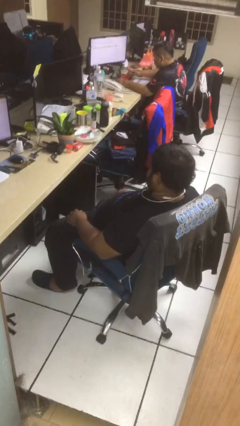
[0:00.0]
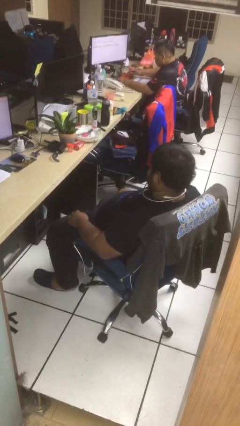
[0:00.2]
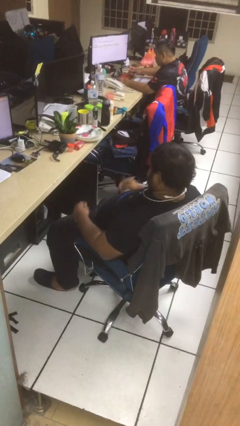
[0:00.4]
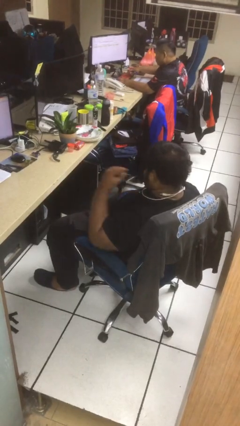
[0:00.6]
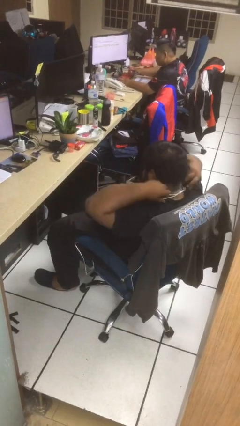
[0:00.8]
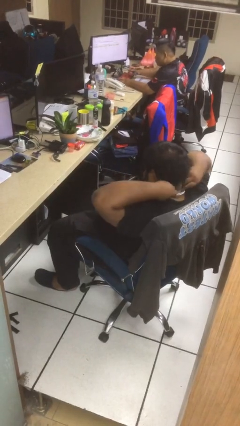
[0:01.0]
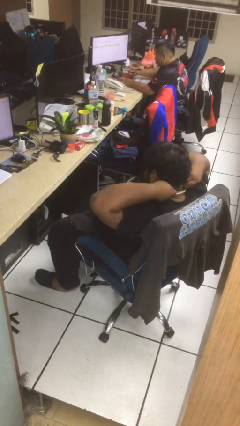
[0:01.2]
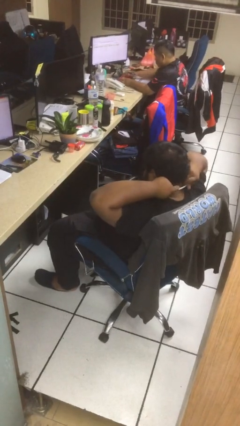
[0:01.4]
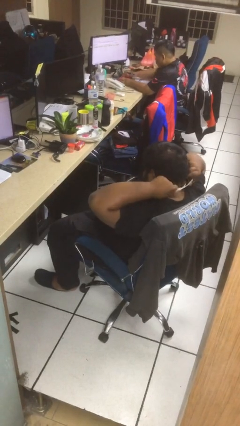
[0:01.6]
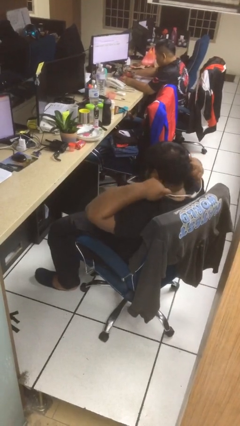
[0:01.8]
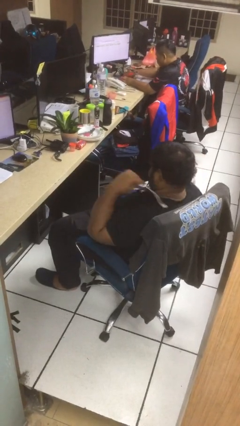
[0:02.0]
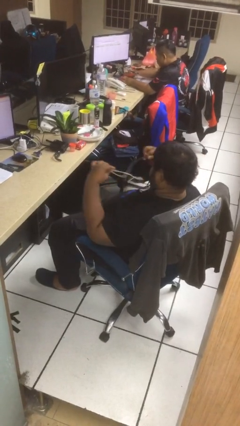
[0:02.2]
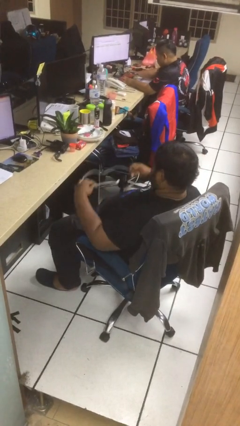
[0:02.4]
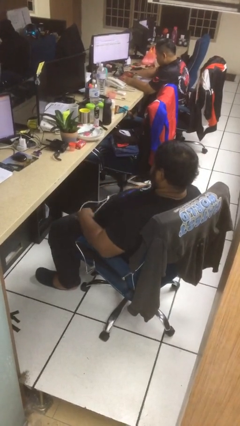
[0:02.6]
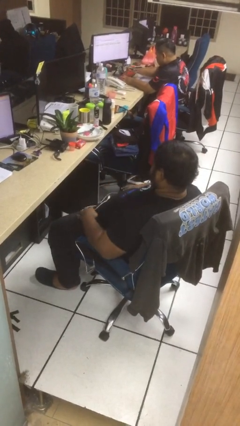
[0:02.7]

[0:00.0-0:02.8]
person takes off necklace

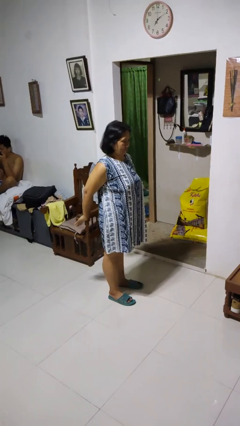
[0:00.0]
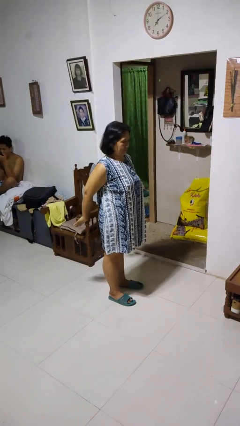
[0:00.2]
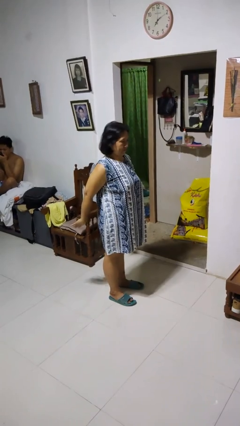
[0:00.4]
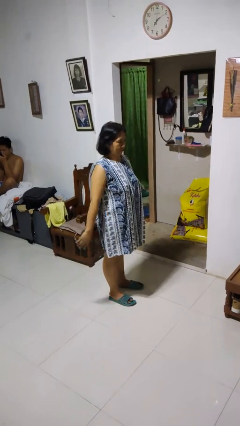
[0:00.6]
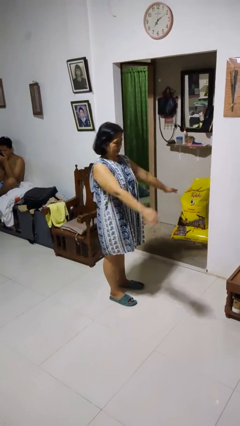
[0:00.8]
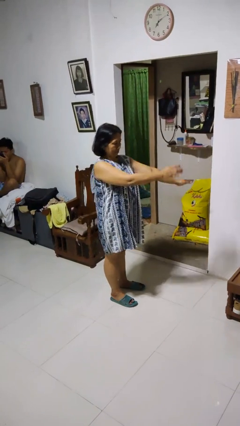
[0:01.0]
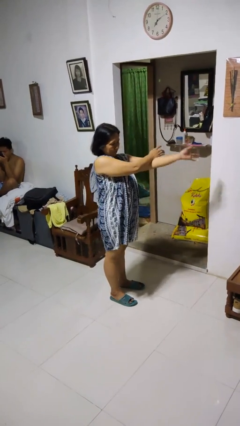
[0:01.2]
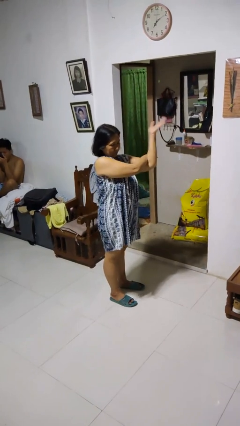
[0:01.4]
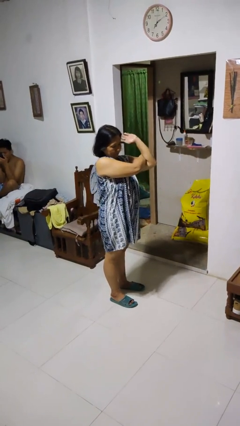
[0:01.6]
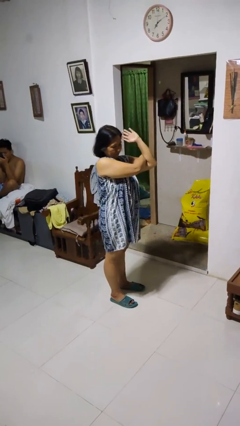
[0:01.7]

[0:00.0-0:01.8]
person stretches arms to side

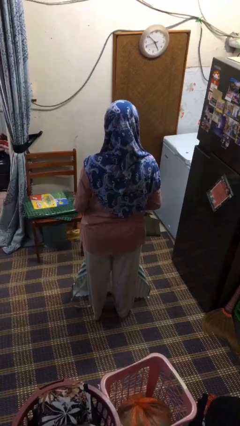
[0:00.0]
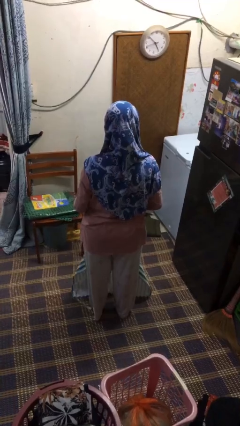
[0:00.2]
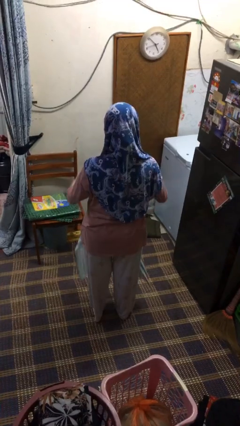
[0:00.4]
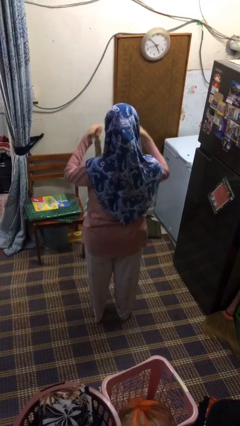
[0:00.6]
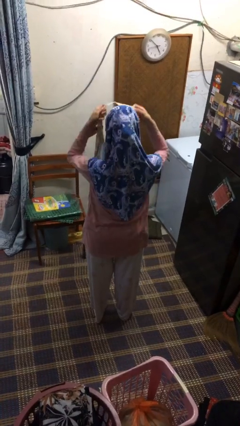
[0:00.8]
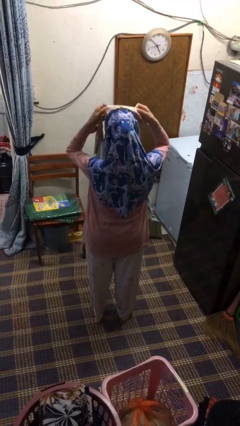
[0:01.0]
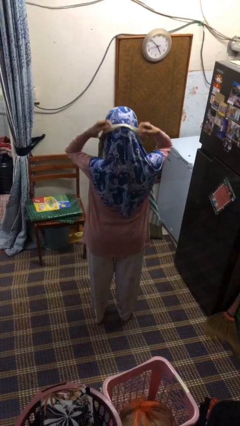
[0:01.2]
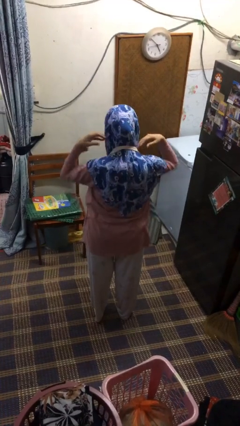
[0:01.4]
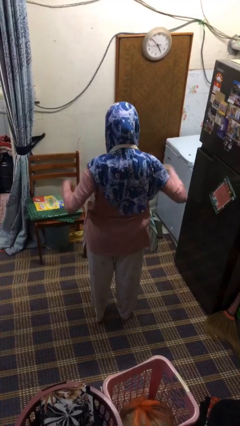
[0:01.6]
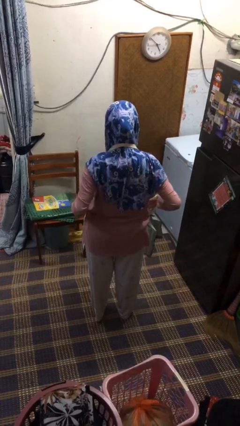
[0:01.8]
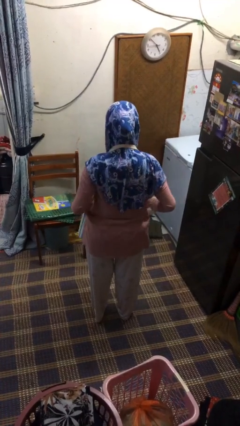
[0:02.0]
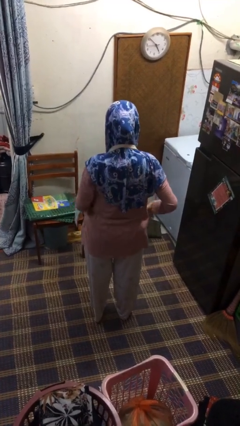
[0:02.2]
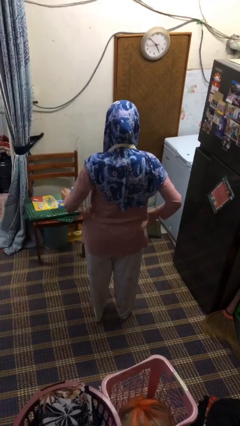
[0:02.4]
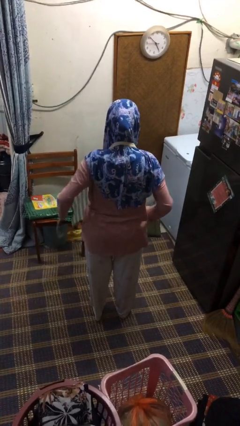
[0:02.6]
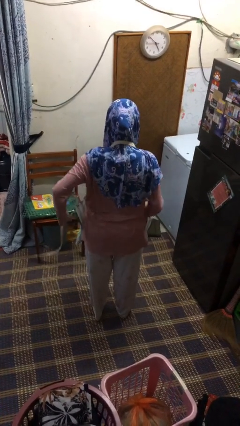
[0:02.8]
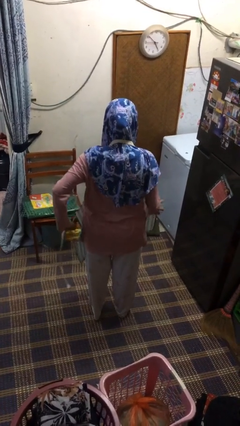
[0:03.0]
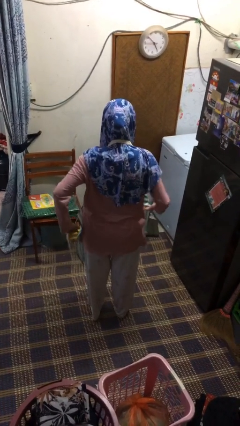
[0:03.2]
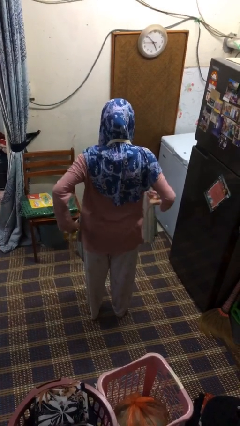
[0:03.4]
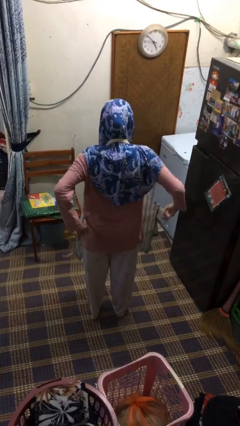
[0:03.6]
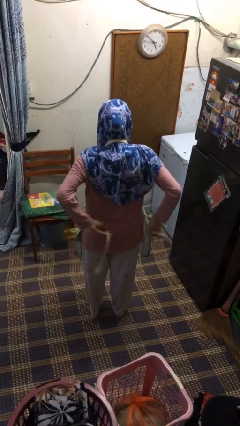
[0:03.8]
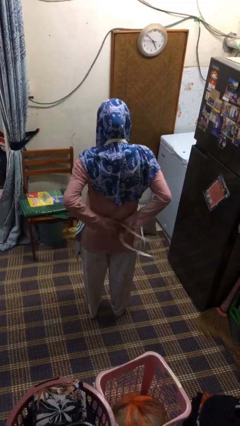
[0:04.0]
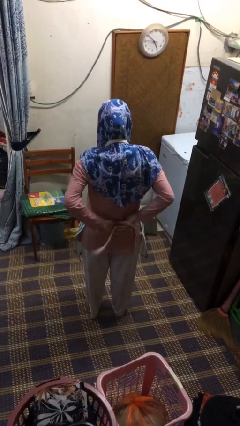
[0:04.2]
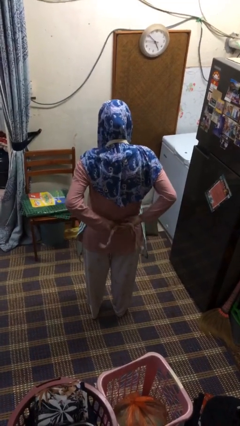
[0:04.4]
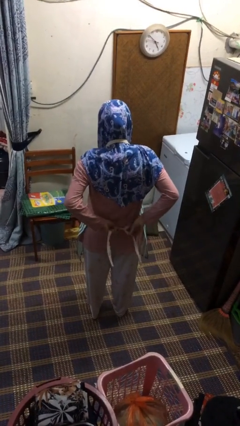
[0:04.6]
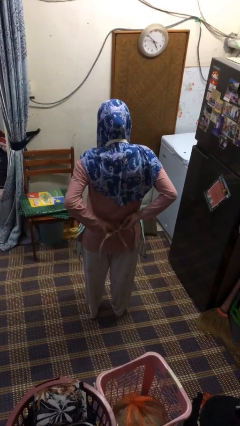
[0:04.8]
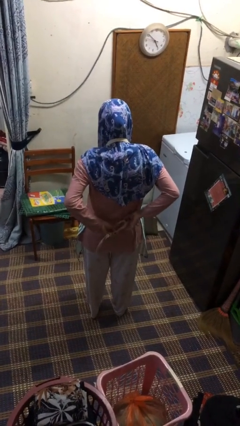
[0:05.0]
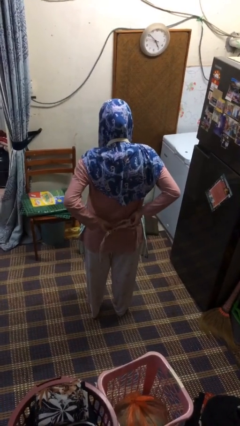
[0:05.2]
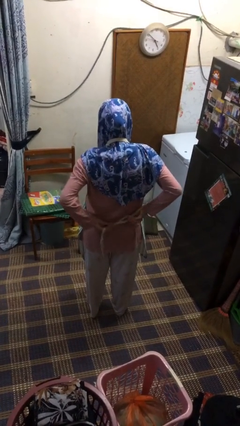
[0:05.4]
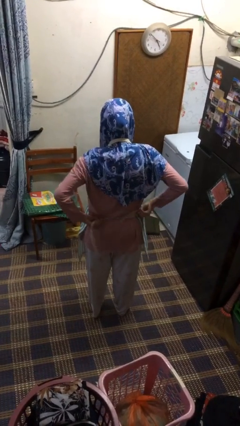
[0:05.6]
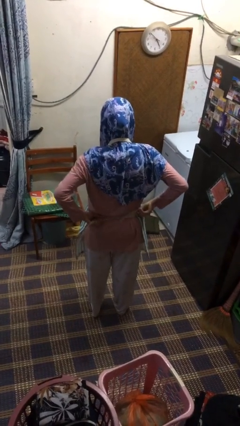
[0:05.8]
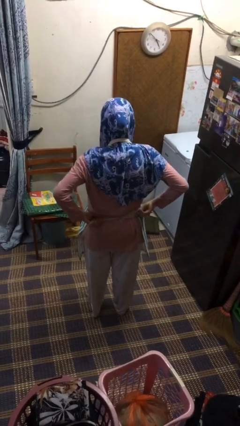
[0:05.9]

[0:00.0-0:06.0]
person puts on apron

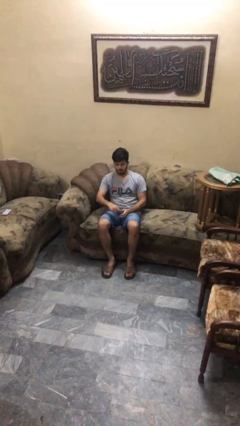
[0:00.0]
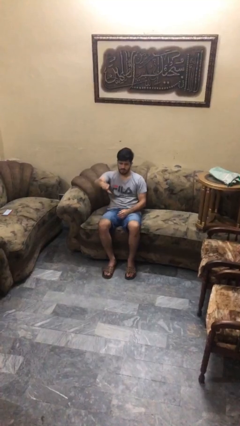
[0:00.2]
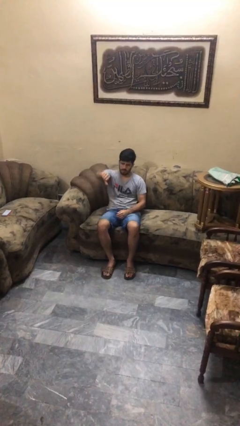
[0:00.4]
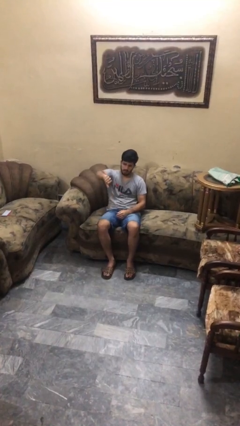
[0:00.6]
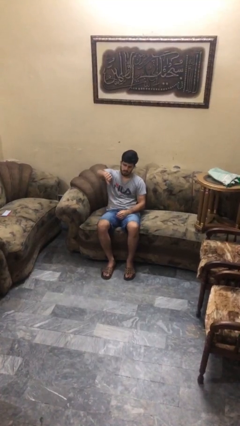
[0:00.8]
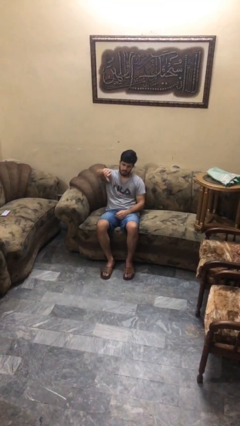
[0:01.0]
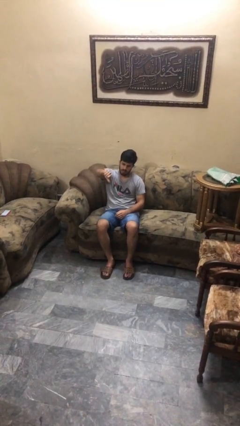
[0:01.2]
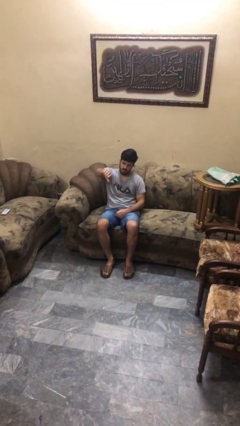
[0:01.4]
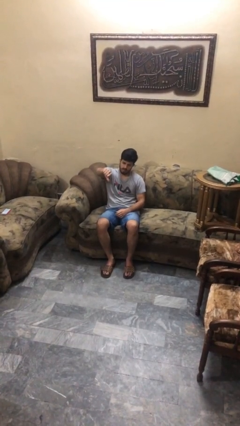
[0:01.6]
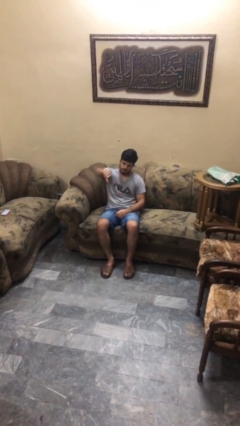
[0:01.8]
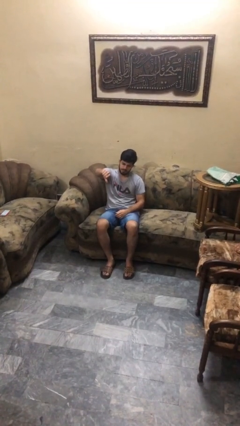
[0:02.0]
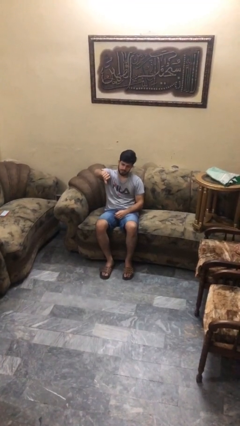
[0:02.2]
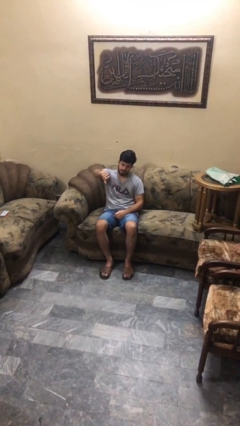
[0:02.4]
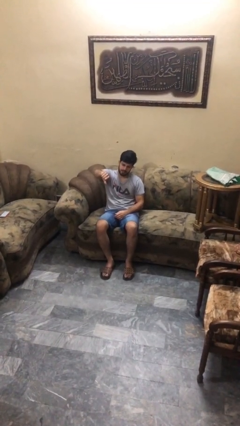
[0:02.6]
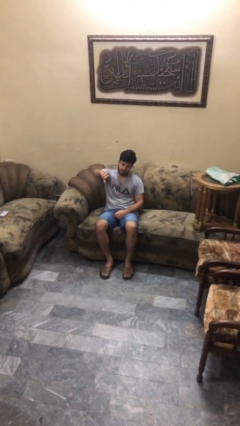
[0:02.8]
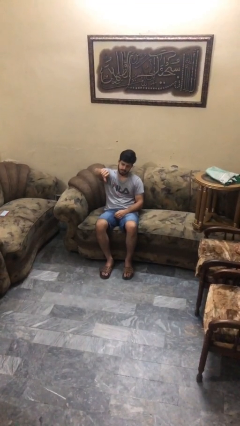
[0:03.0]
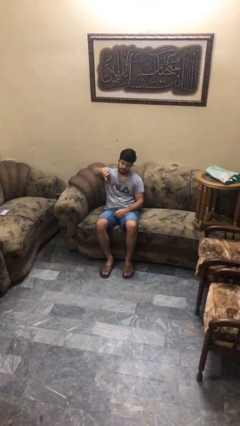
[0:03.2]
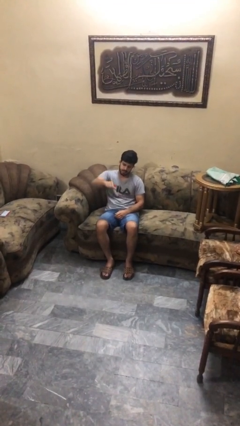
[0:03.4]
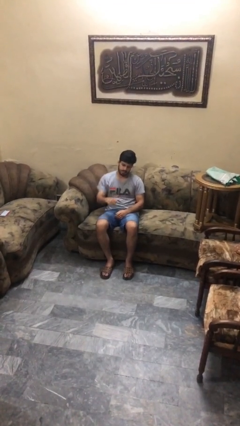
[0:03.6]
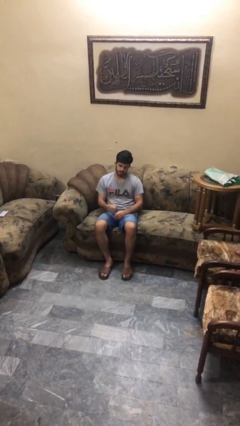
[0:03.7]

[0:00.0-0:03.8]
person gestures thumbs down

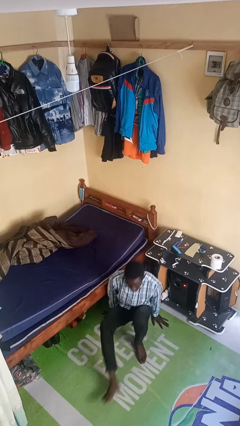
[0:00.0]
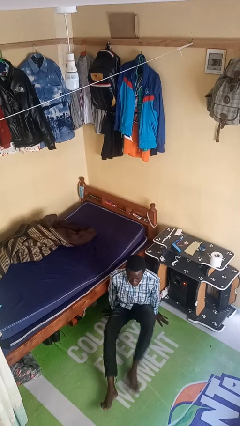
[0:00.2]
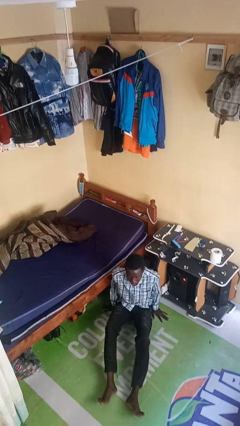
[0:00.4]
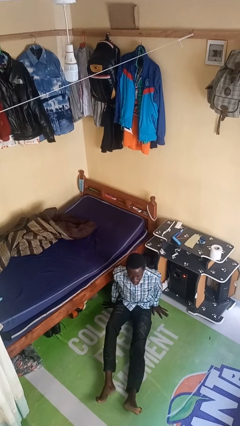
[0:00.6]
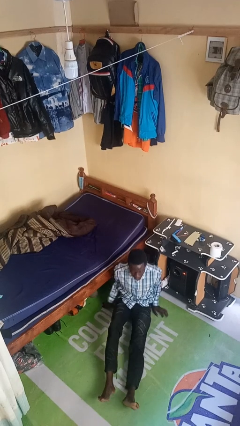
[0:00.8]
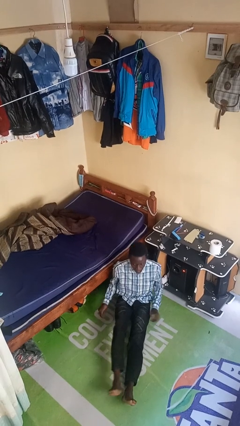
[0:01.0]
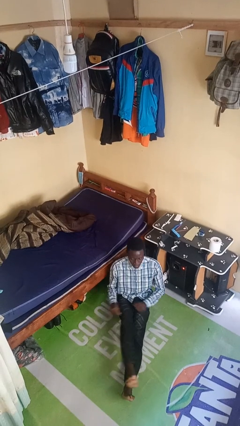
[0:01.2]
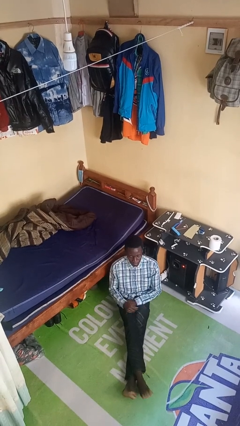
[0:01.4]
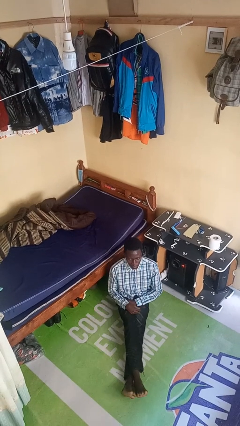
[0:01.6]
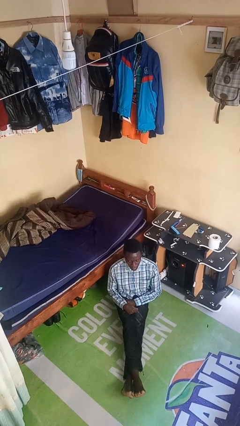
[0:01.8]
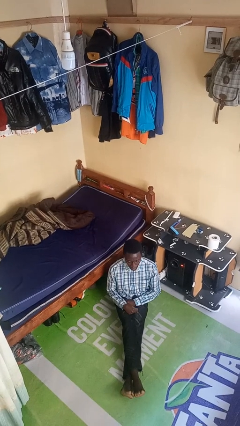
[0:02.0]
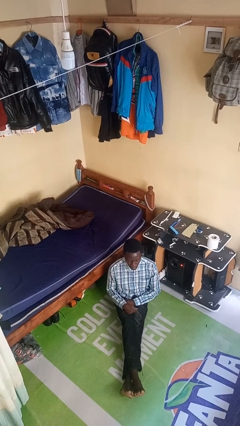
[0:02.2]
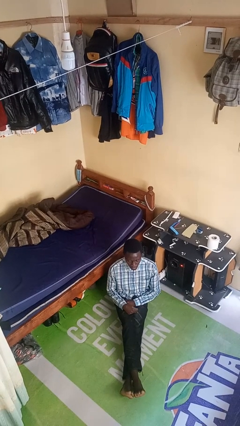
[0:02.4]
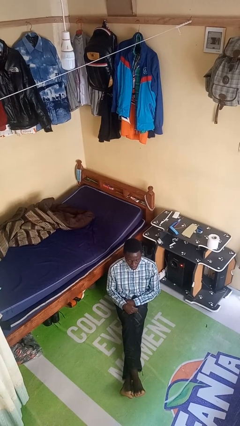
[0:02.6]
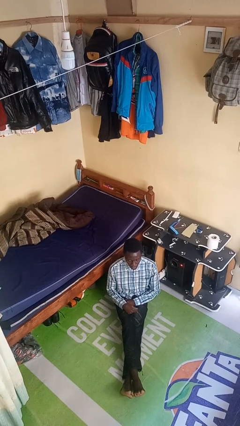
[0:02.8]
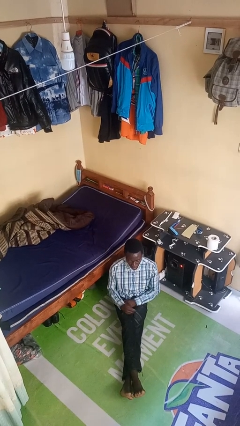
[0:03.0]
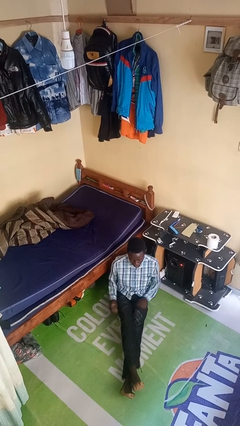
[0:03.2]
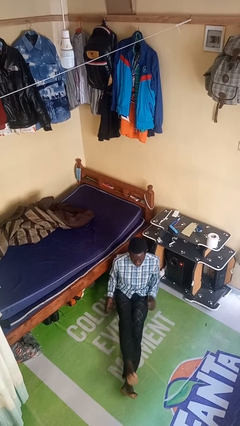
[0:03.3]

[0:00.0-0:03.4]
person sits crisscross
